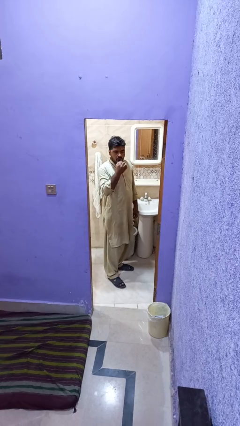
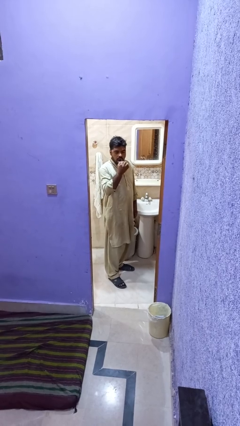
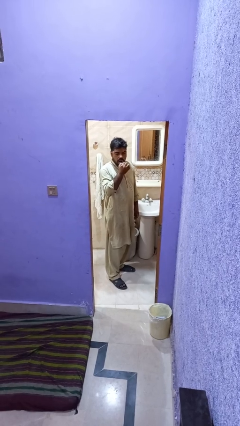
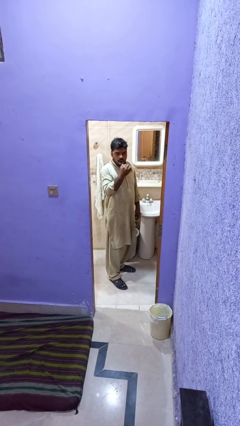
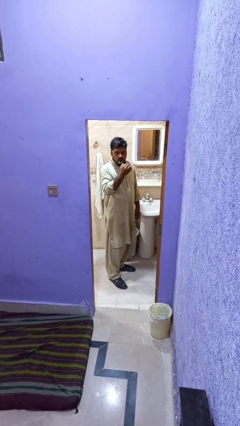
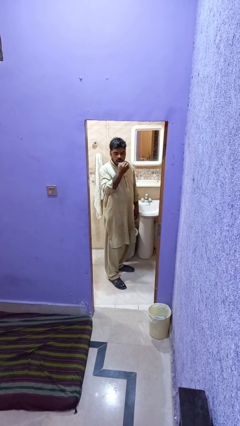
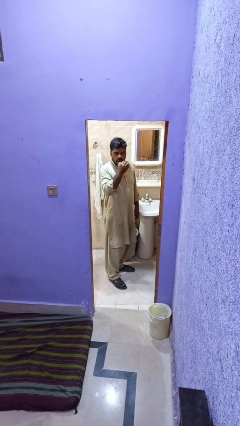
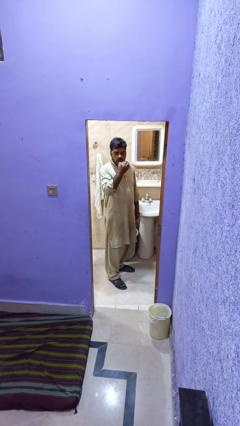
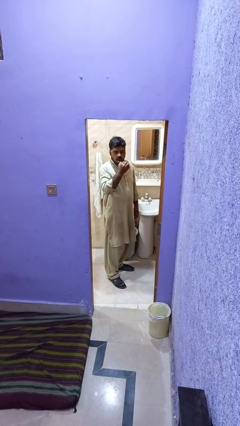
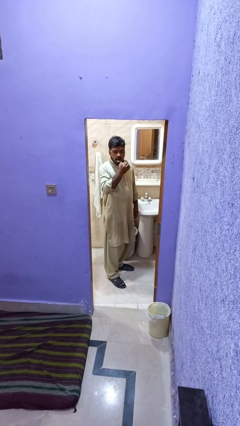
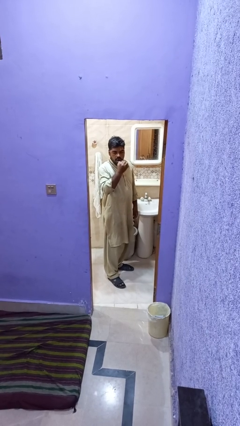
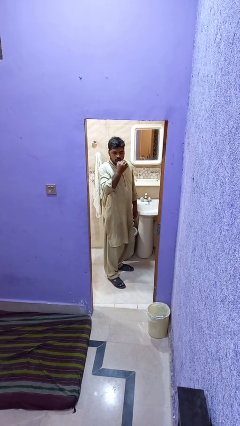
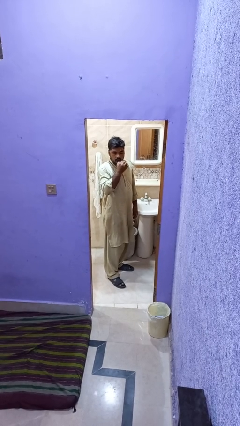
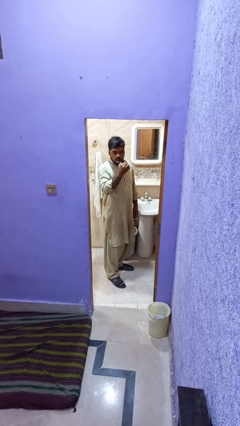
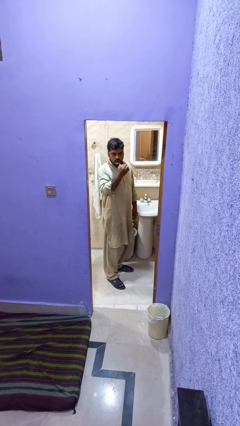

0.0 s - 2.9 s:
person brushes teeth

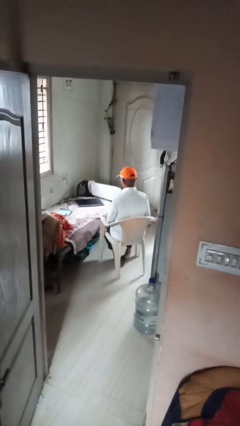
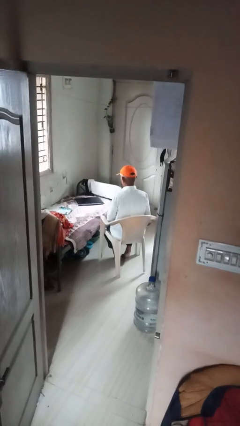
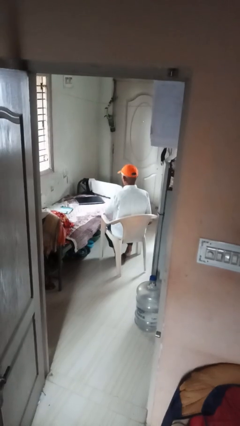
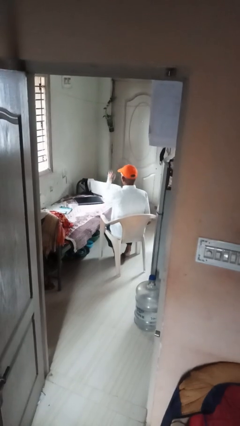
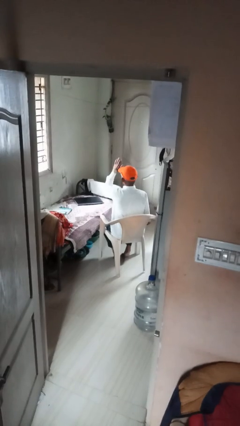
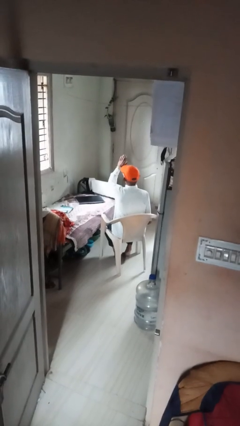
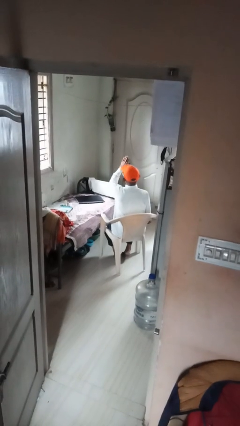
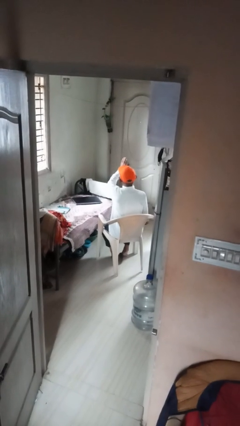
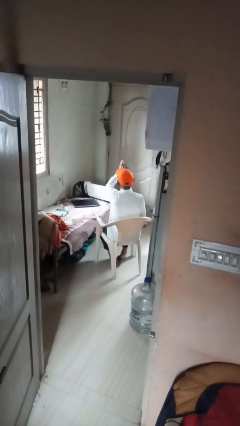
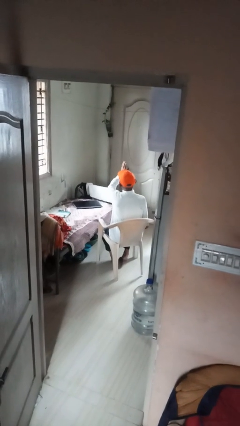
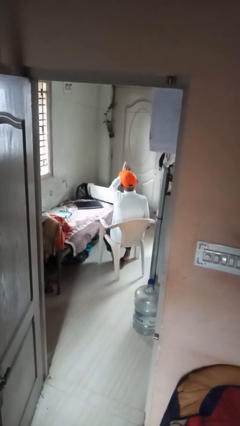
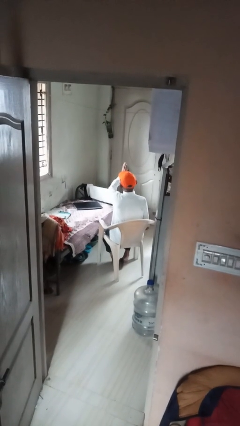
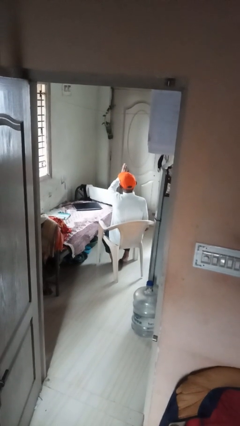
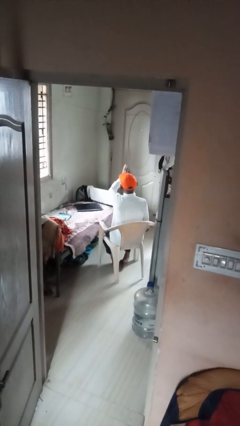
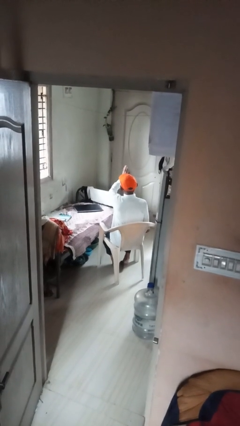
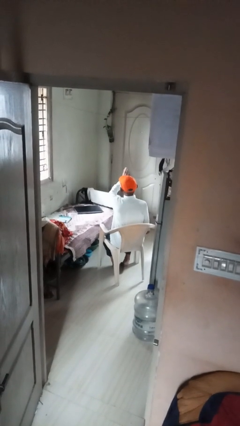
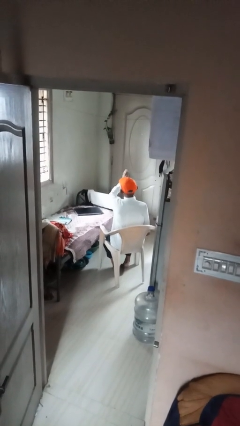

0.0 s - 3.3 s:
person looks at wristwatch

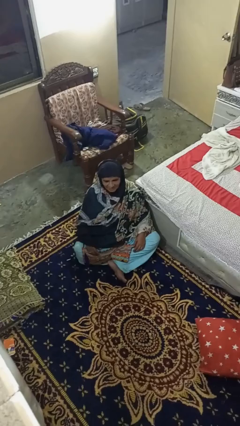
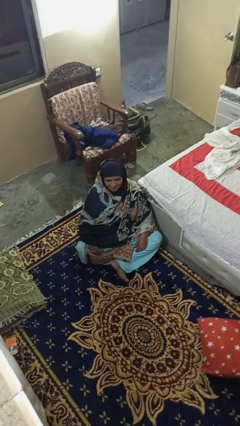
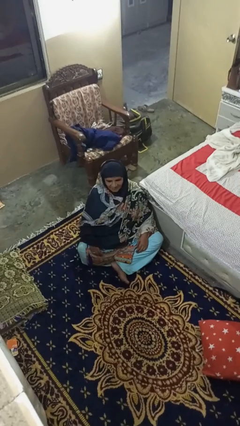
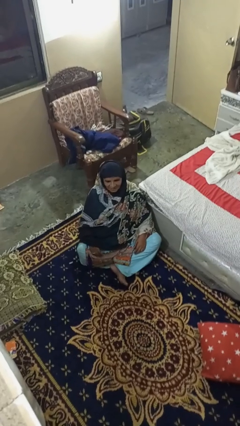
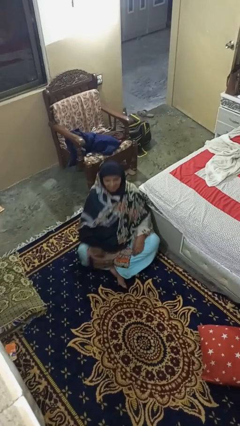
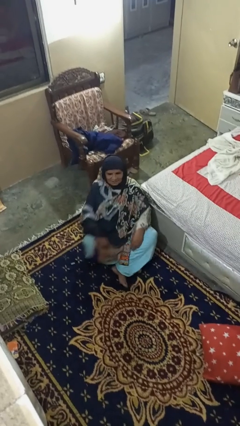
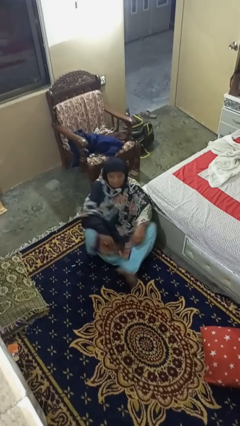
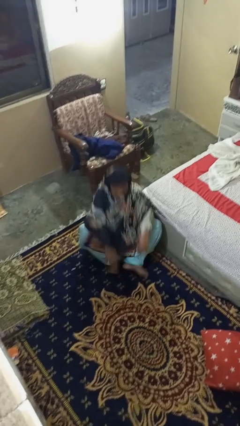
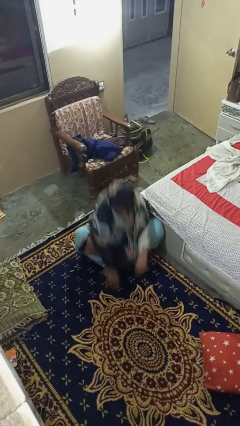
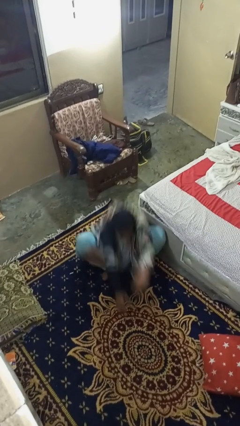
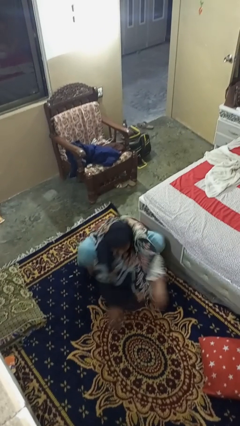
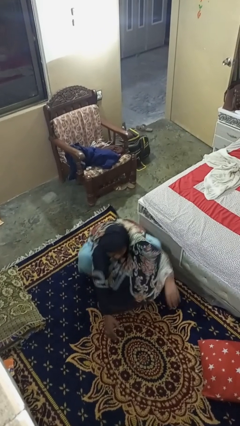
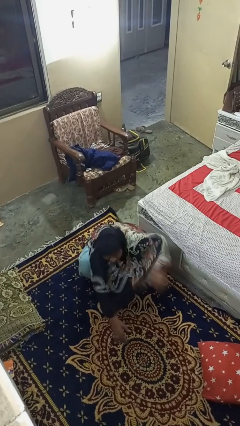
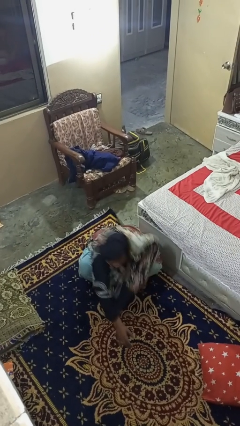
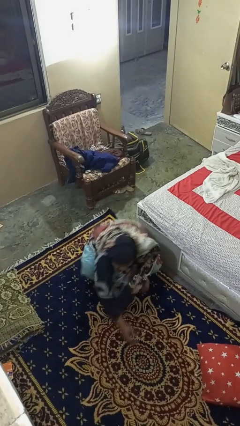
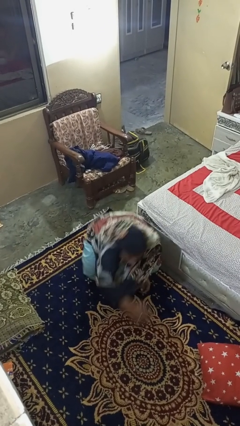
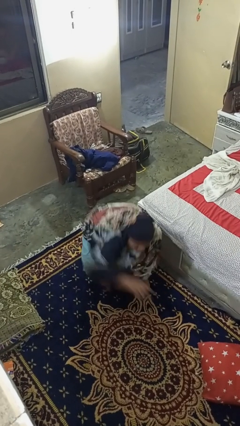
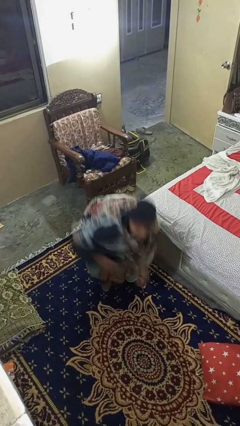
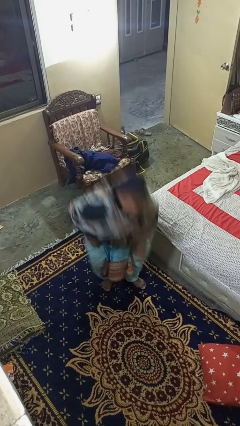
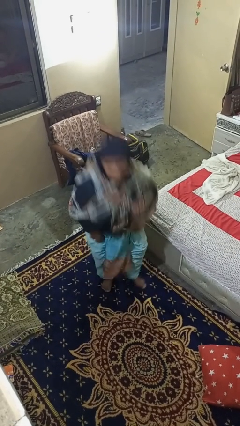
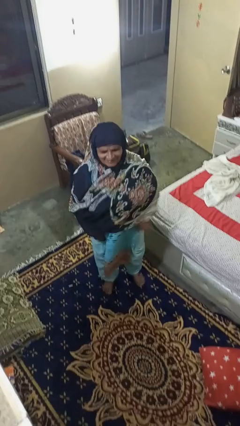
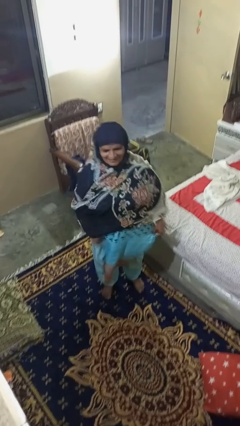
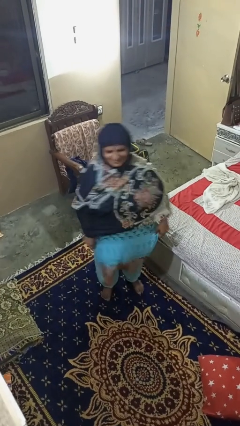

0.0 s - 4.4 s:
person stands up from floor

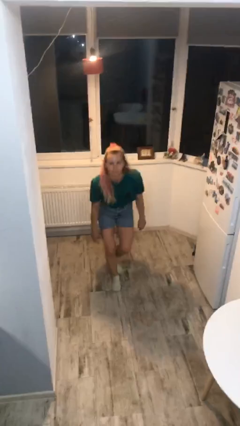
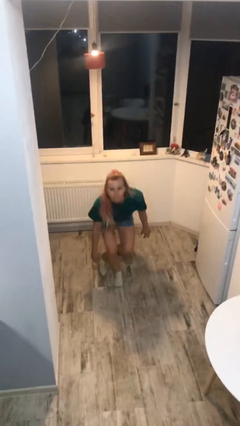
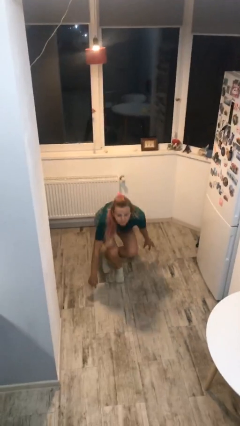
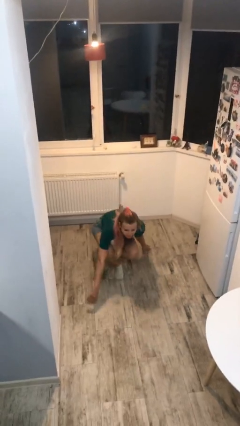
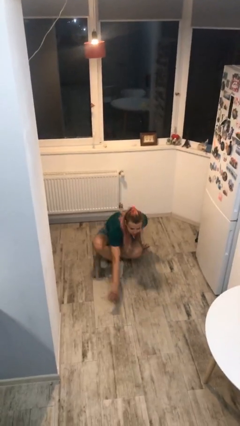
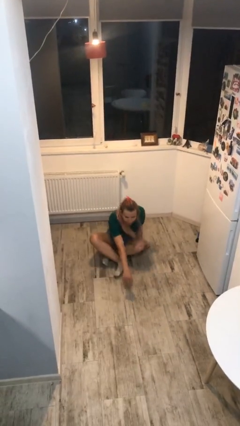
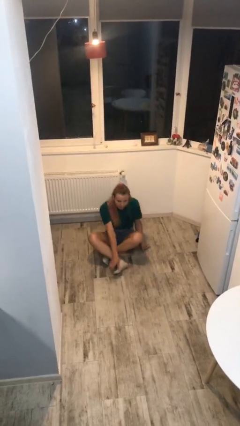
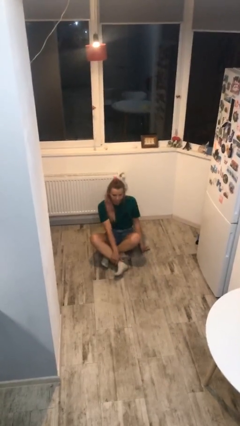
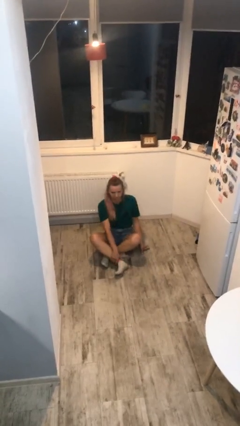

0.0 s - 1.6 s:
person sits crisscross

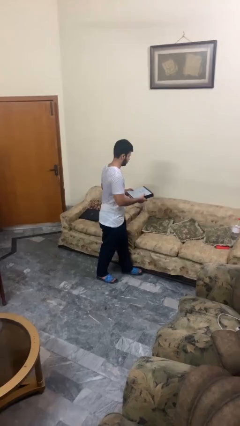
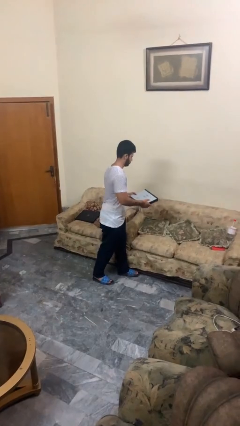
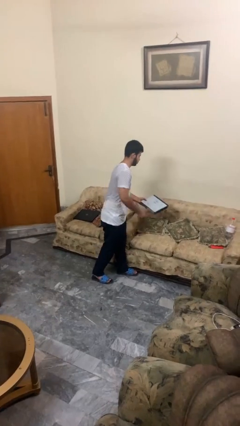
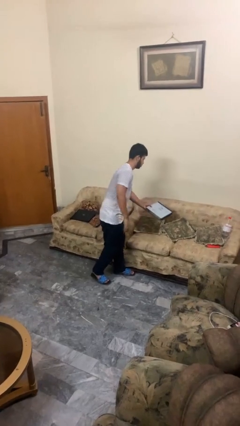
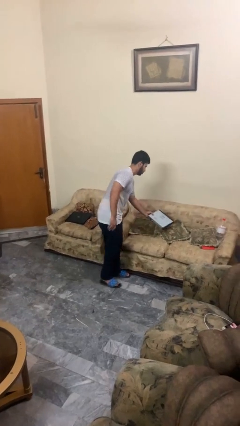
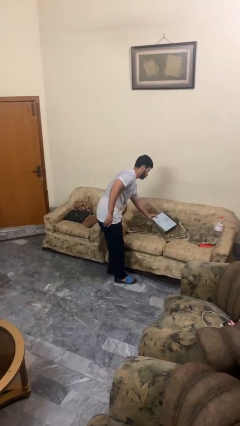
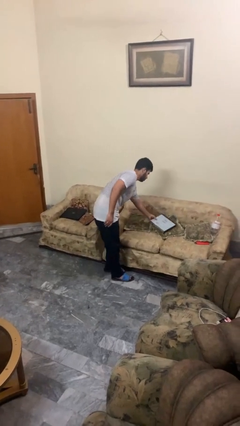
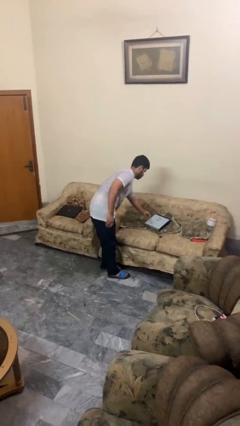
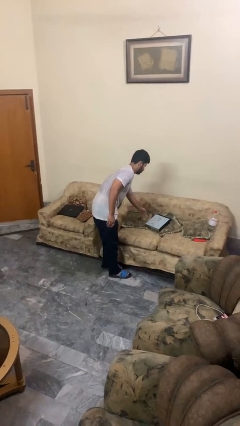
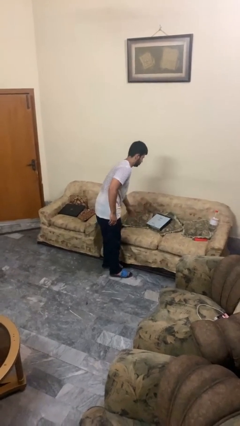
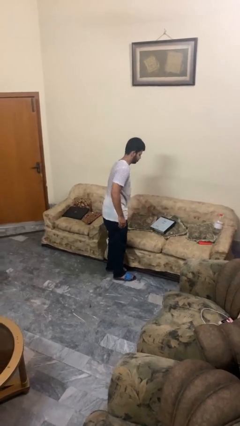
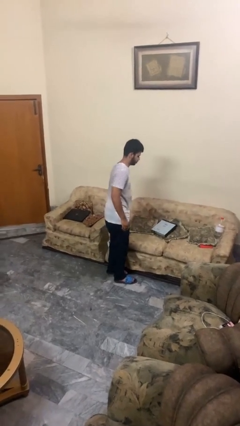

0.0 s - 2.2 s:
person puts down object on couch

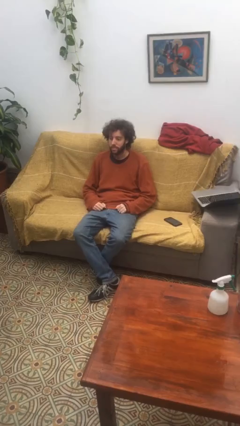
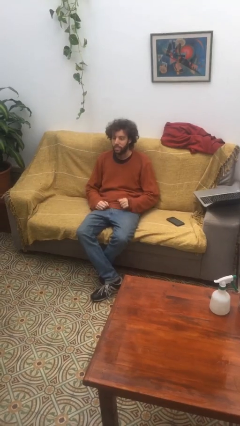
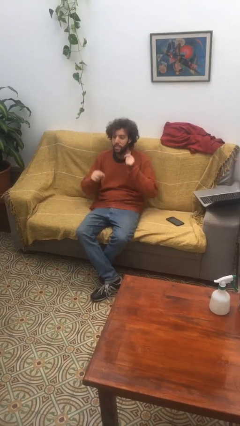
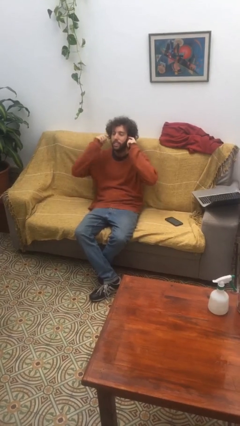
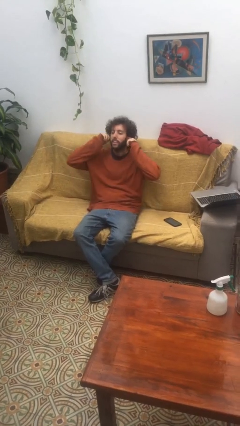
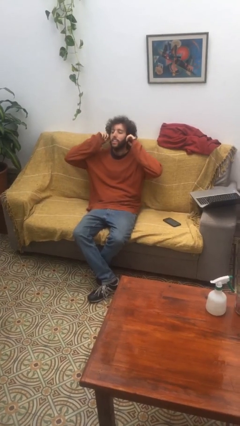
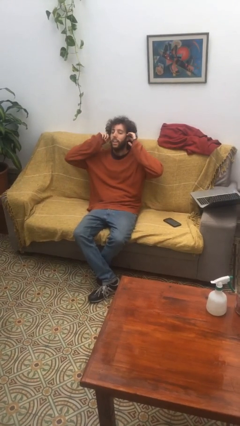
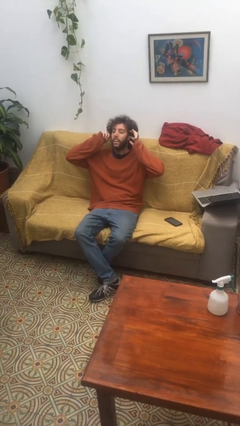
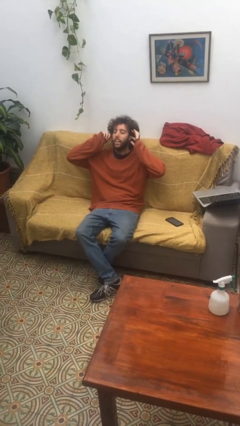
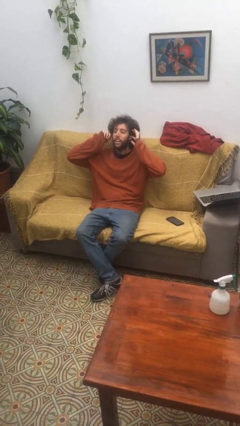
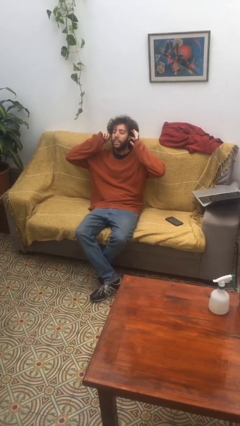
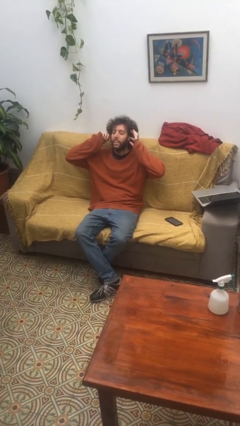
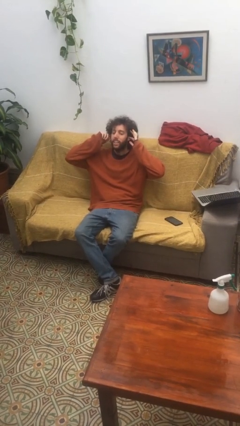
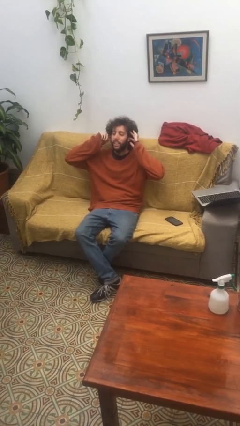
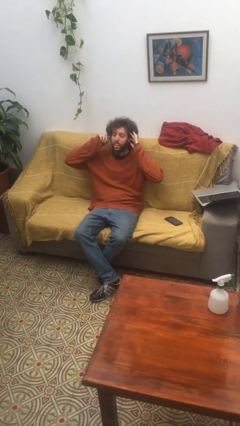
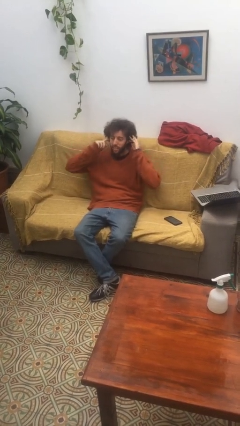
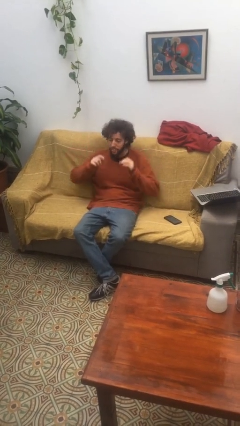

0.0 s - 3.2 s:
person puts fingers in ear
